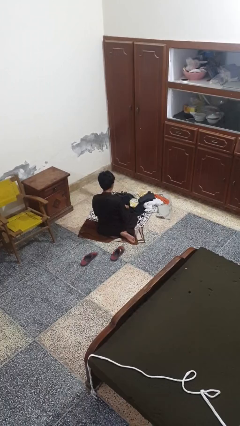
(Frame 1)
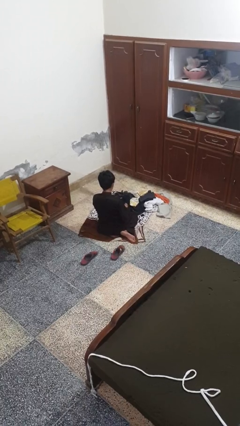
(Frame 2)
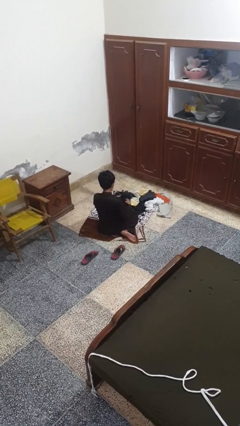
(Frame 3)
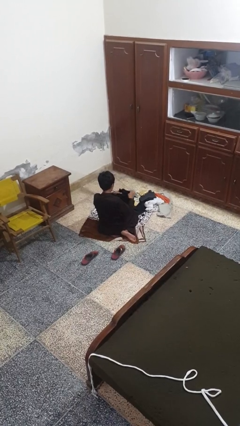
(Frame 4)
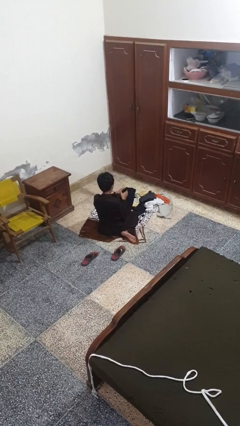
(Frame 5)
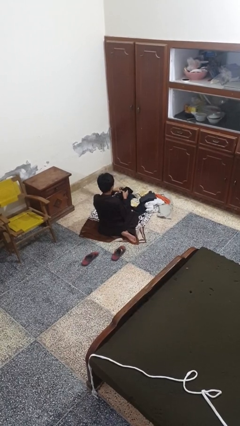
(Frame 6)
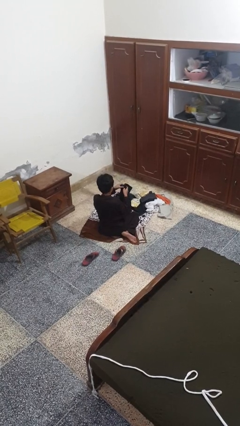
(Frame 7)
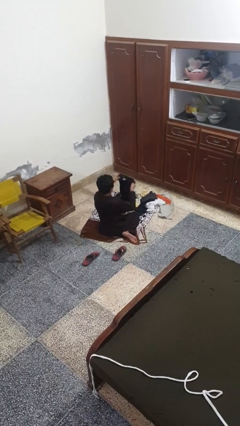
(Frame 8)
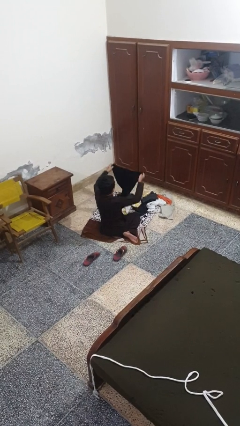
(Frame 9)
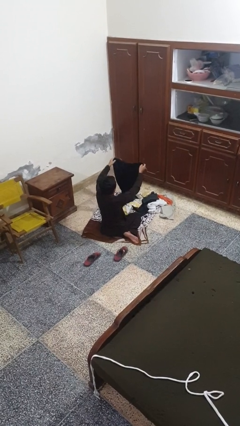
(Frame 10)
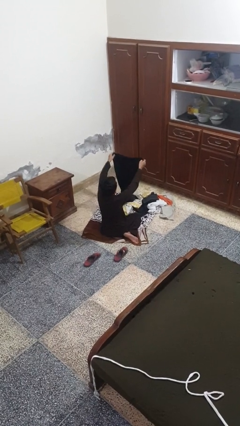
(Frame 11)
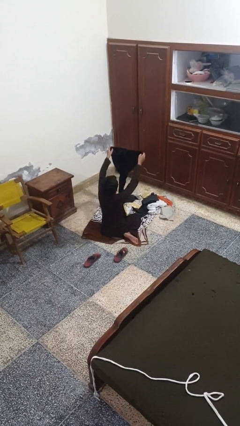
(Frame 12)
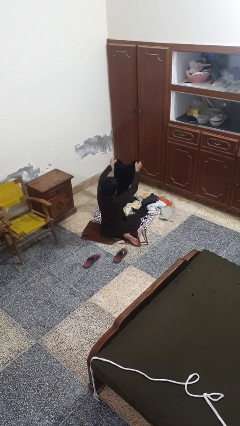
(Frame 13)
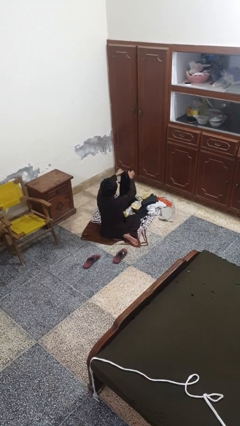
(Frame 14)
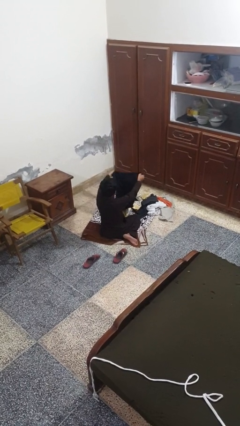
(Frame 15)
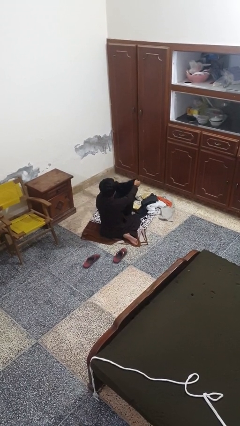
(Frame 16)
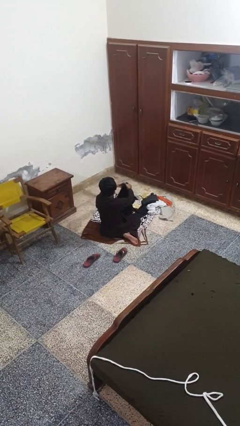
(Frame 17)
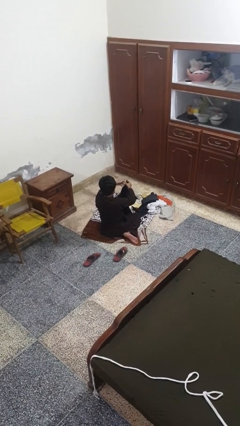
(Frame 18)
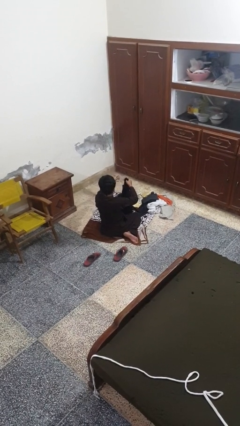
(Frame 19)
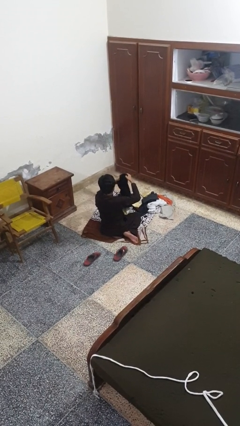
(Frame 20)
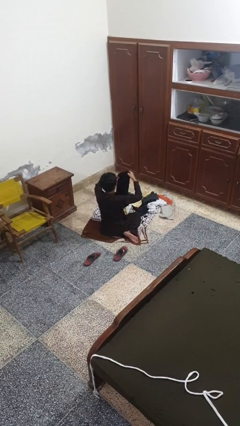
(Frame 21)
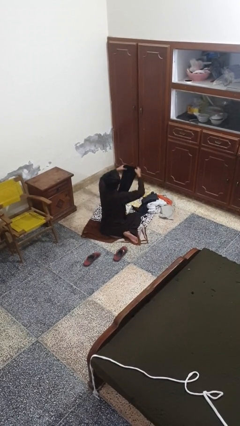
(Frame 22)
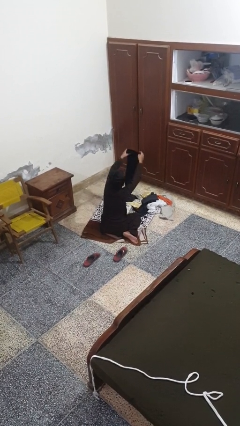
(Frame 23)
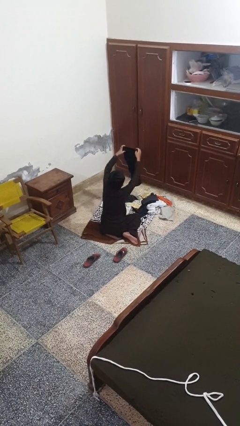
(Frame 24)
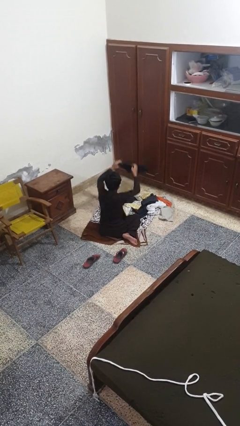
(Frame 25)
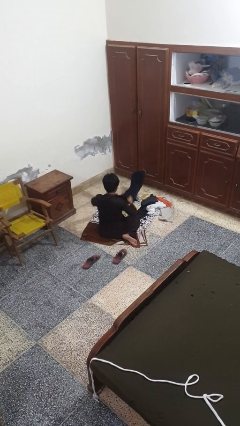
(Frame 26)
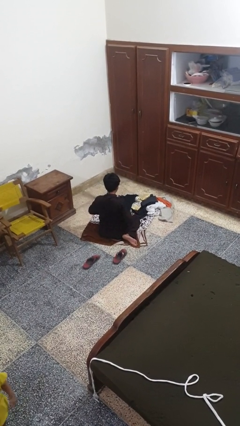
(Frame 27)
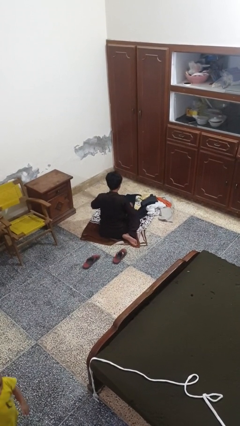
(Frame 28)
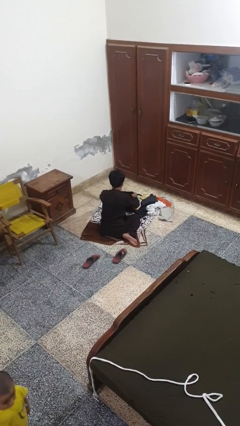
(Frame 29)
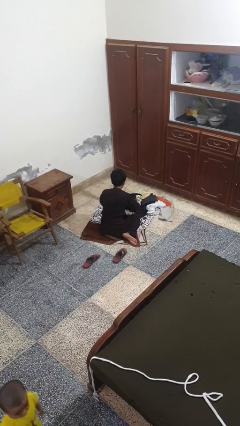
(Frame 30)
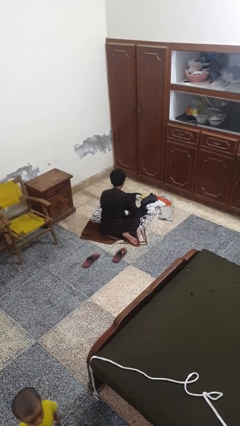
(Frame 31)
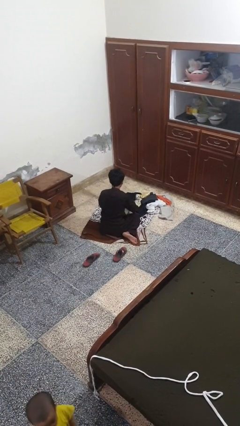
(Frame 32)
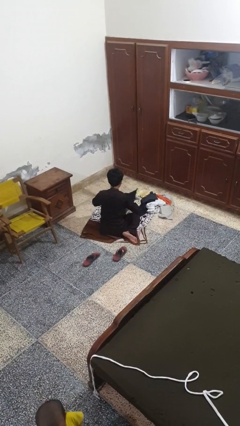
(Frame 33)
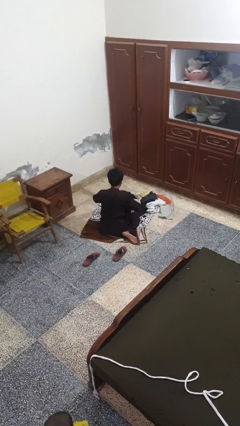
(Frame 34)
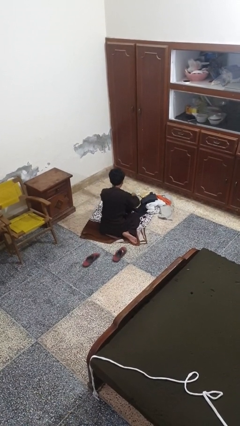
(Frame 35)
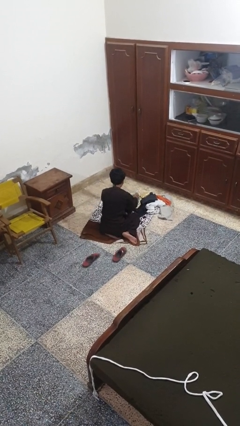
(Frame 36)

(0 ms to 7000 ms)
person folds pants

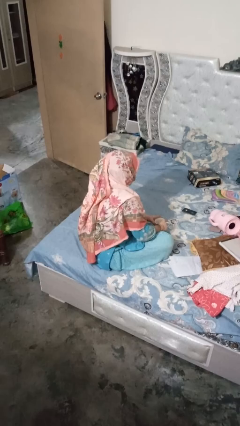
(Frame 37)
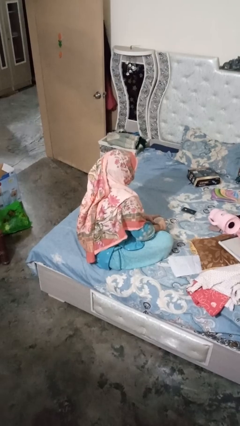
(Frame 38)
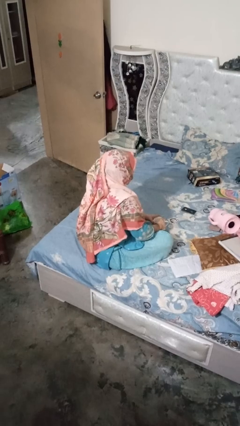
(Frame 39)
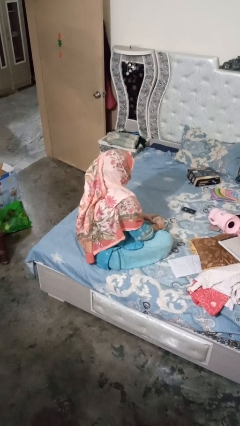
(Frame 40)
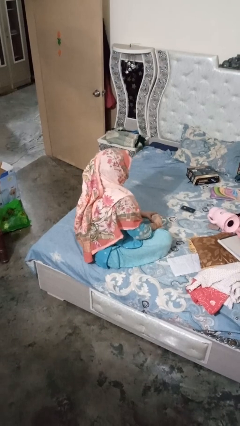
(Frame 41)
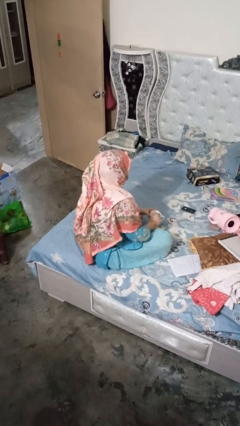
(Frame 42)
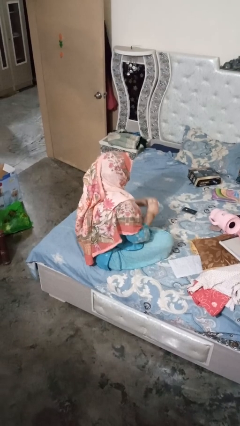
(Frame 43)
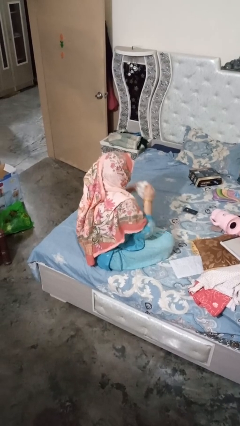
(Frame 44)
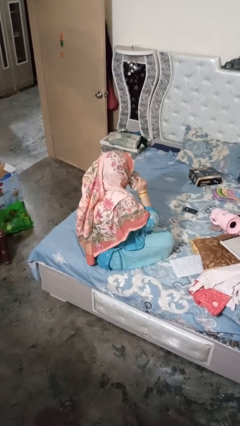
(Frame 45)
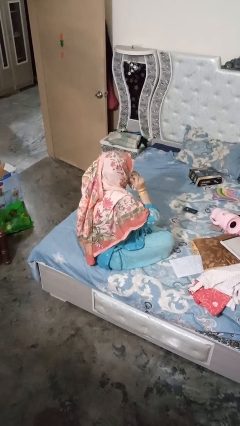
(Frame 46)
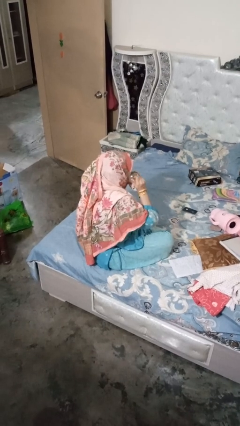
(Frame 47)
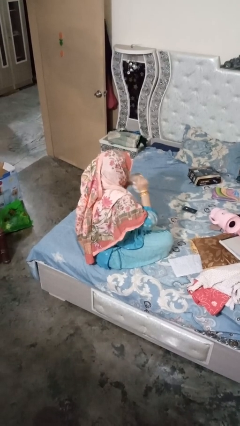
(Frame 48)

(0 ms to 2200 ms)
person drinks from mug

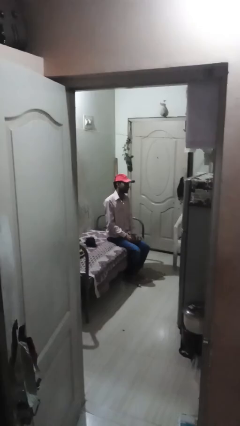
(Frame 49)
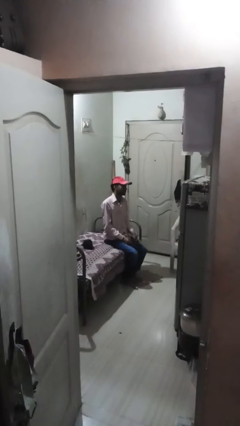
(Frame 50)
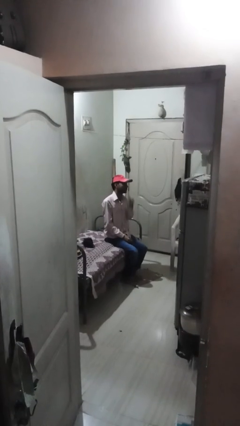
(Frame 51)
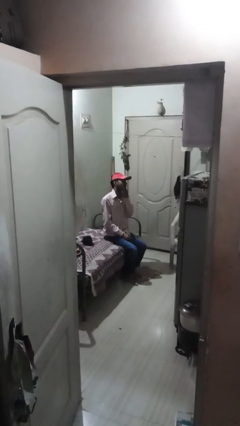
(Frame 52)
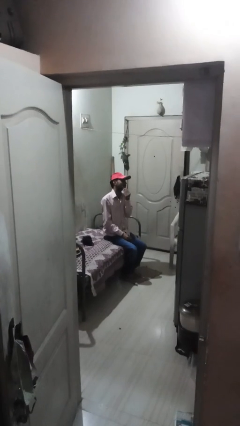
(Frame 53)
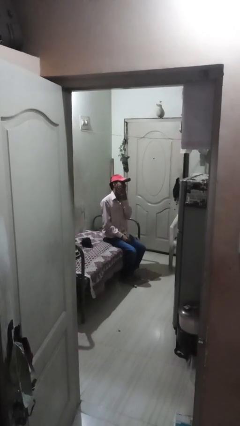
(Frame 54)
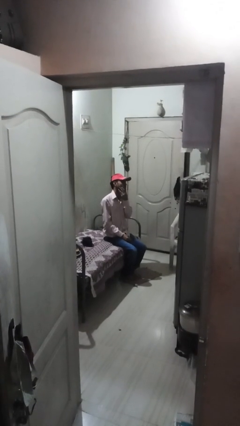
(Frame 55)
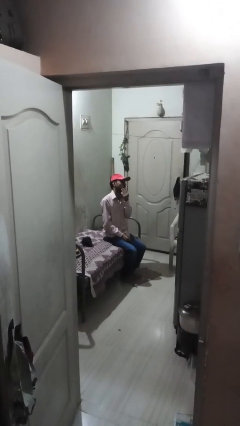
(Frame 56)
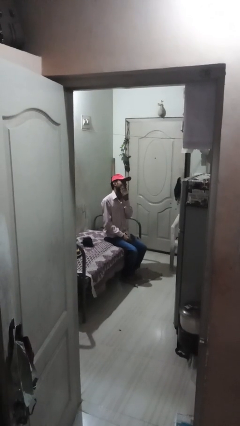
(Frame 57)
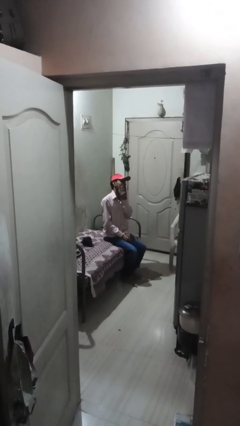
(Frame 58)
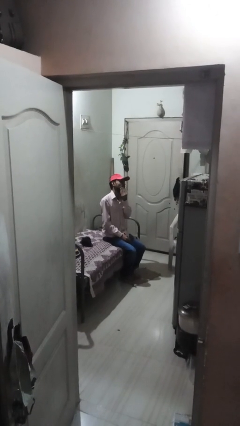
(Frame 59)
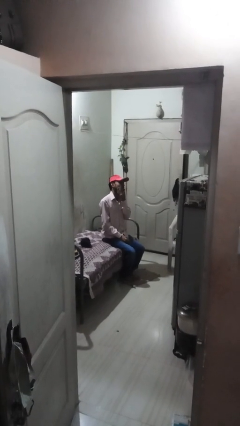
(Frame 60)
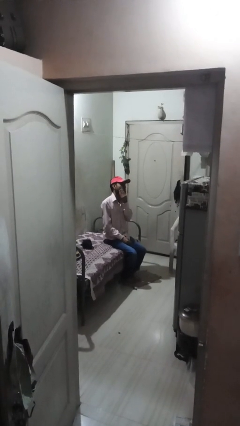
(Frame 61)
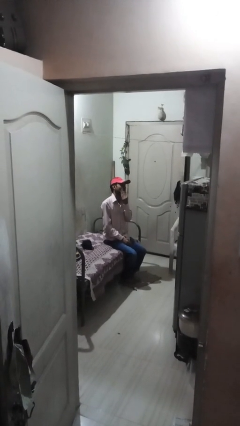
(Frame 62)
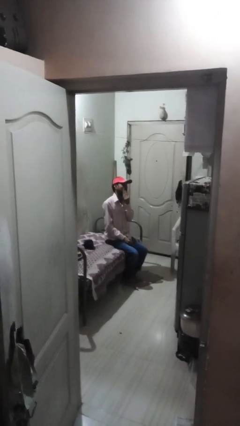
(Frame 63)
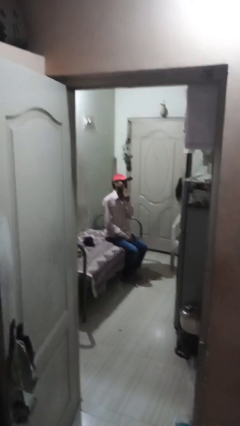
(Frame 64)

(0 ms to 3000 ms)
person strokes chin

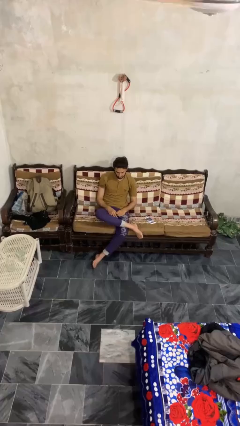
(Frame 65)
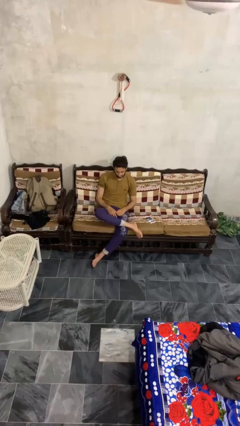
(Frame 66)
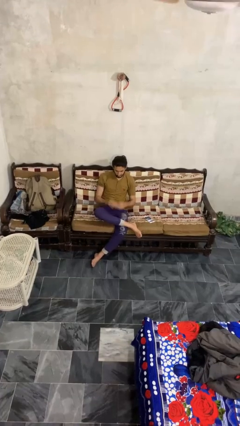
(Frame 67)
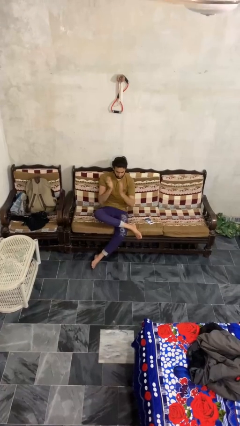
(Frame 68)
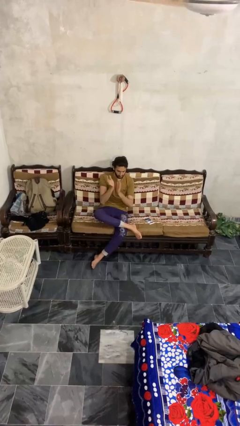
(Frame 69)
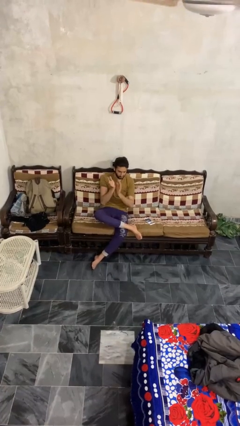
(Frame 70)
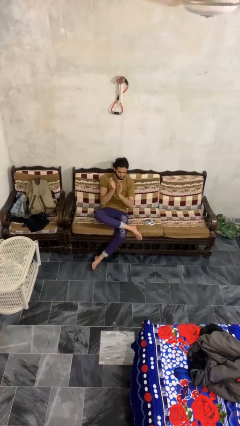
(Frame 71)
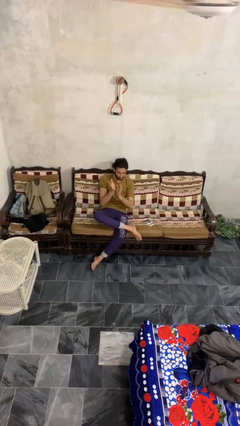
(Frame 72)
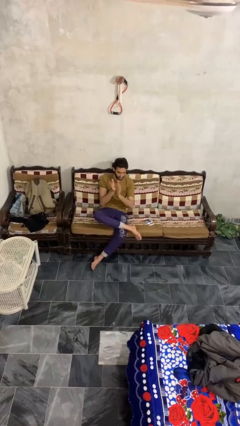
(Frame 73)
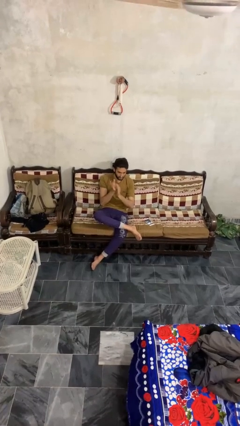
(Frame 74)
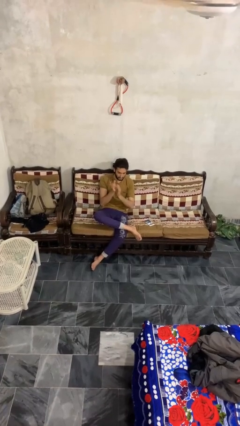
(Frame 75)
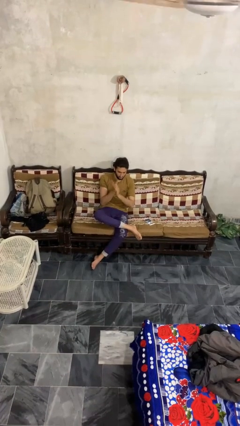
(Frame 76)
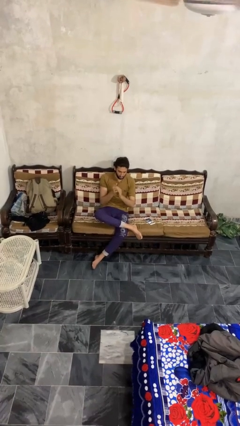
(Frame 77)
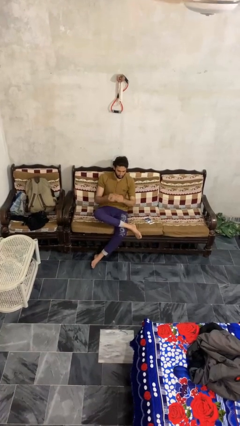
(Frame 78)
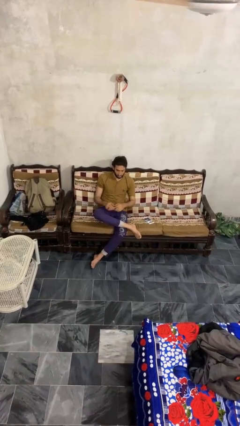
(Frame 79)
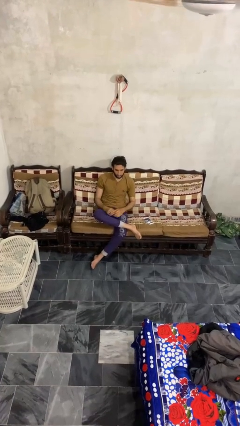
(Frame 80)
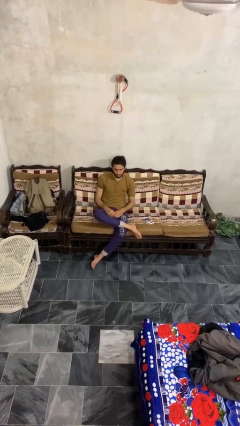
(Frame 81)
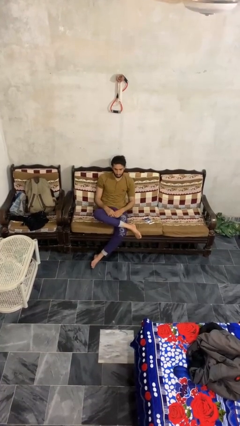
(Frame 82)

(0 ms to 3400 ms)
person claps hands

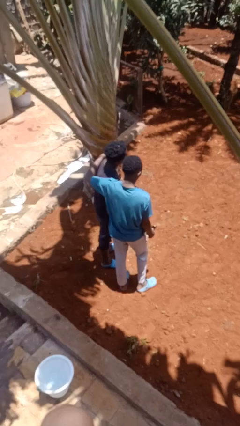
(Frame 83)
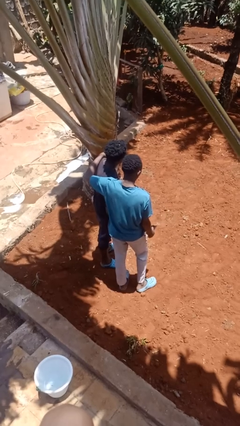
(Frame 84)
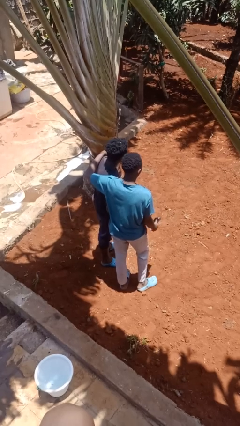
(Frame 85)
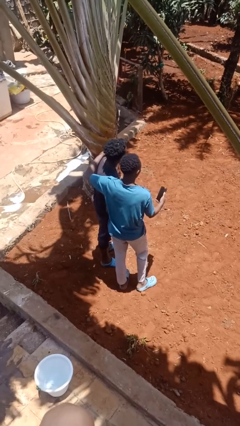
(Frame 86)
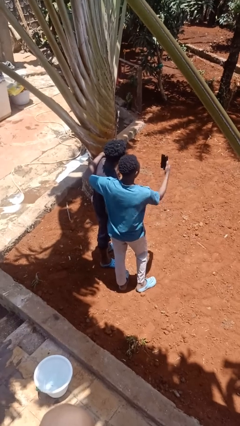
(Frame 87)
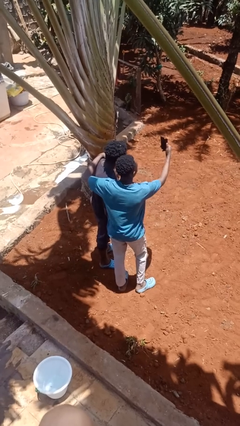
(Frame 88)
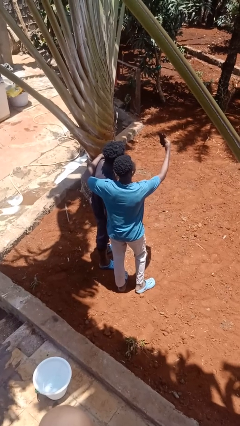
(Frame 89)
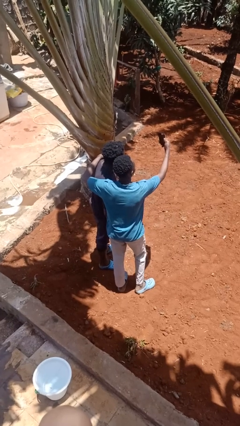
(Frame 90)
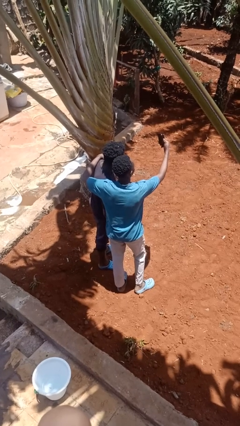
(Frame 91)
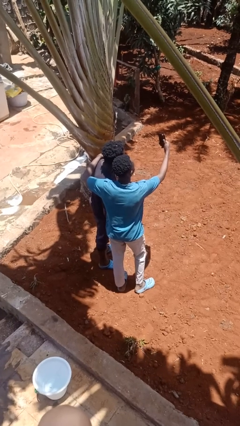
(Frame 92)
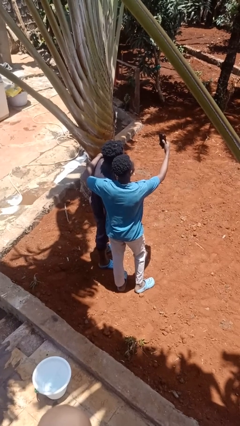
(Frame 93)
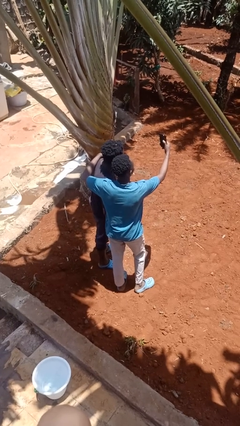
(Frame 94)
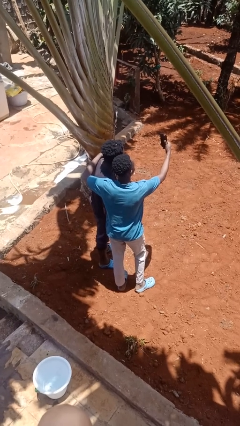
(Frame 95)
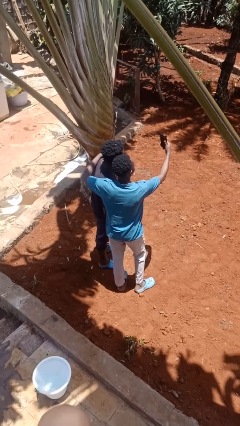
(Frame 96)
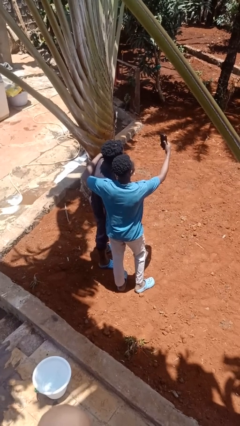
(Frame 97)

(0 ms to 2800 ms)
person takes selfie with person
